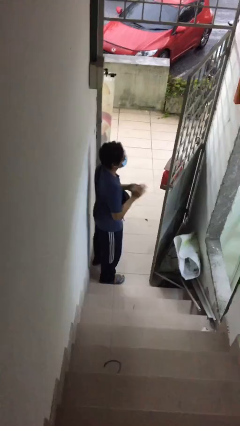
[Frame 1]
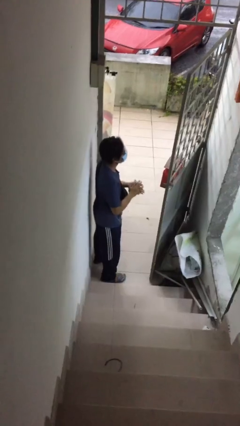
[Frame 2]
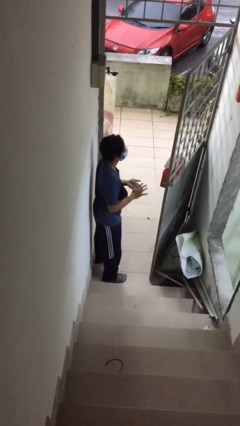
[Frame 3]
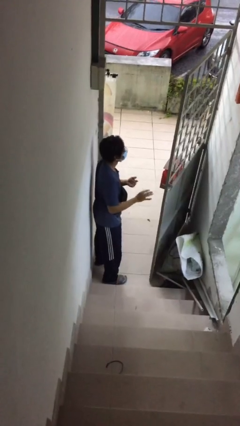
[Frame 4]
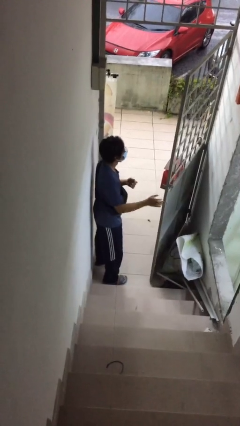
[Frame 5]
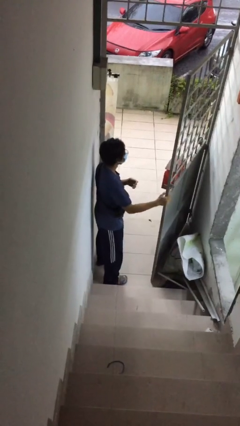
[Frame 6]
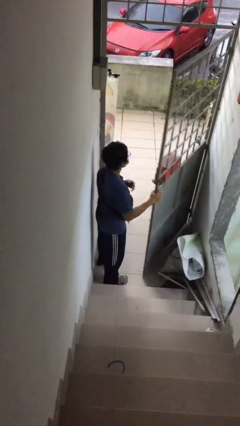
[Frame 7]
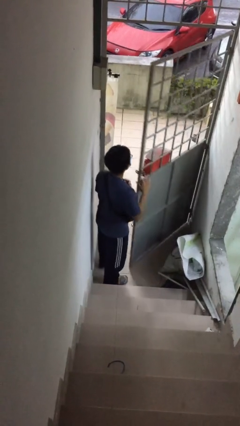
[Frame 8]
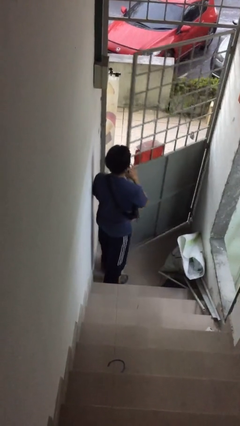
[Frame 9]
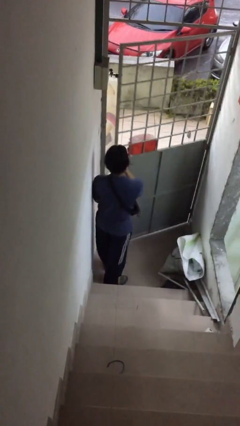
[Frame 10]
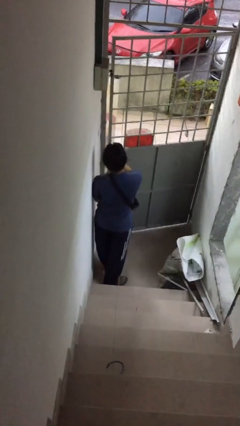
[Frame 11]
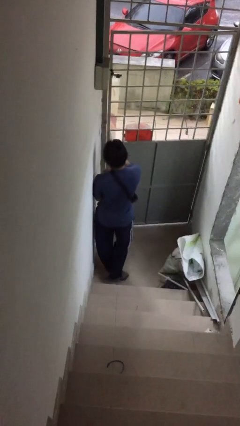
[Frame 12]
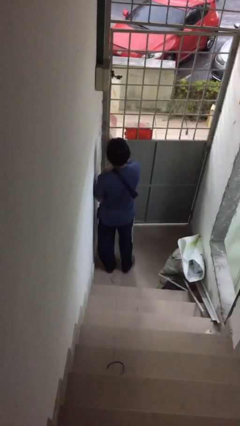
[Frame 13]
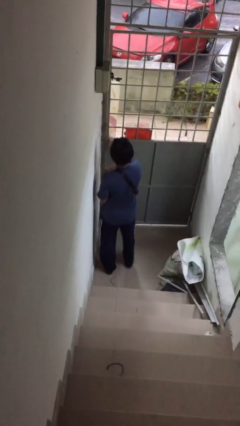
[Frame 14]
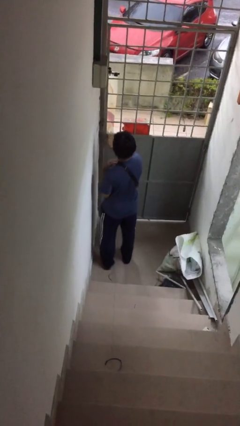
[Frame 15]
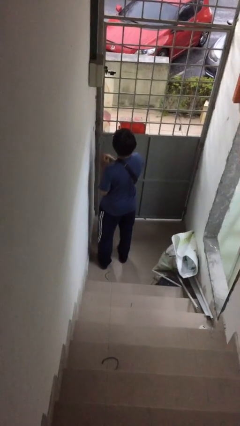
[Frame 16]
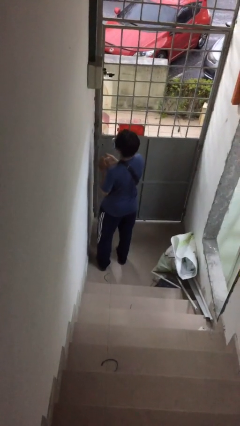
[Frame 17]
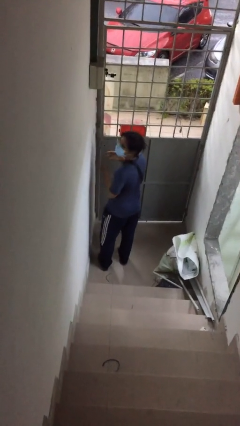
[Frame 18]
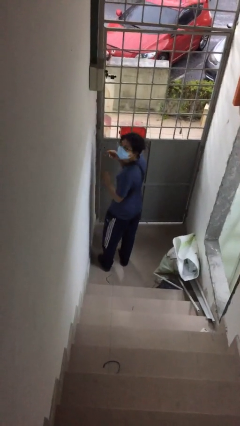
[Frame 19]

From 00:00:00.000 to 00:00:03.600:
person closes facility door

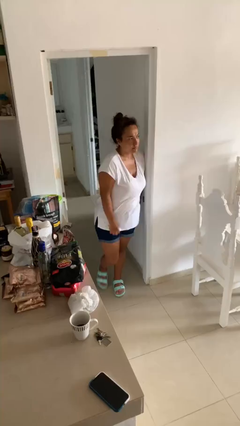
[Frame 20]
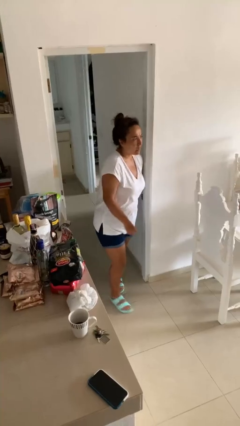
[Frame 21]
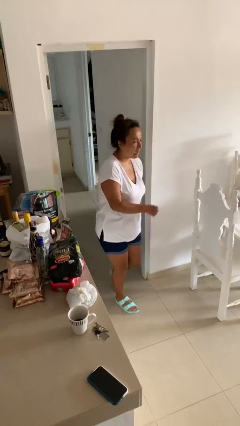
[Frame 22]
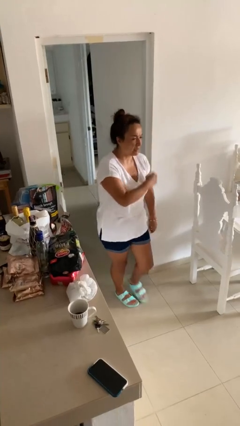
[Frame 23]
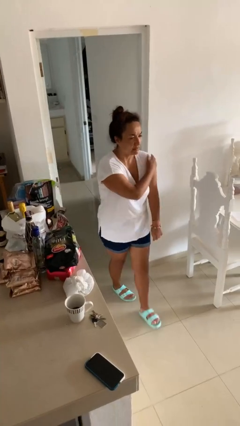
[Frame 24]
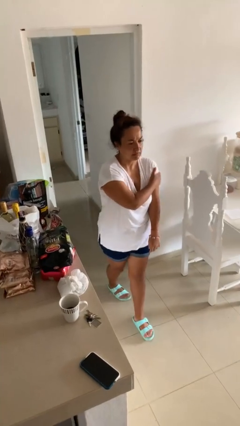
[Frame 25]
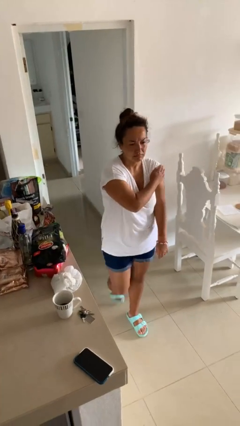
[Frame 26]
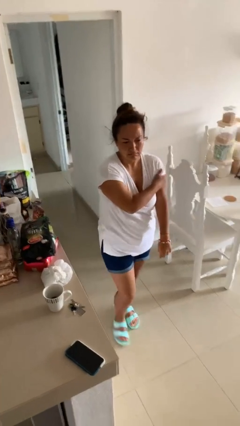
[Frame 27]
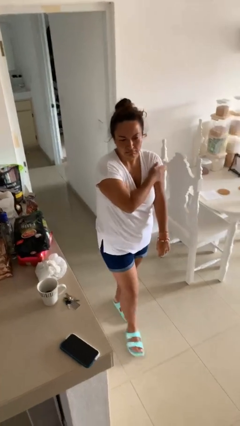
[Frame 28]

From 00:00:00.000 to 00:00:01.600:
person bumps into wall

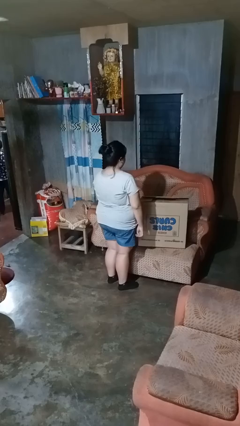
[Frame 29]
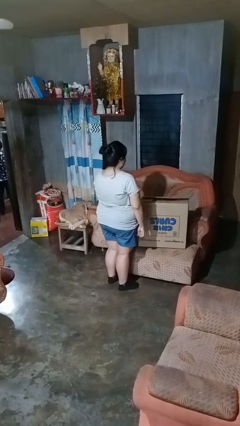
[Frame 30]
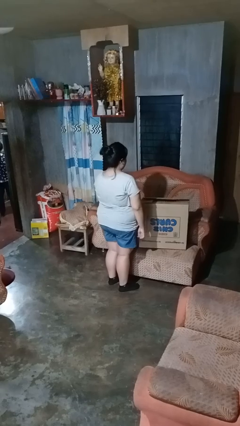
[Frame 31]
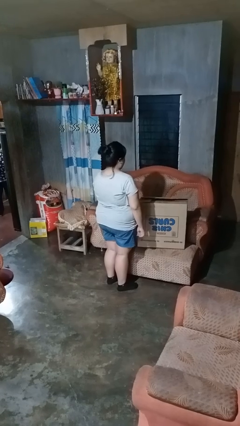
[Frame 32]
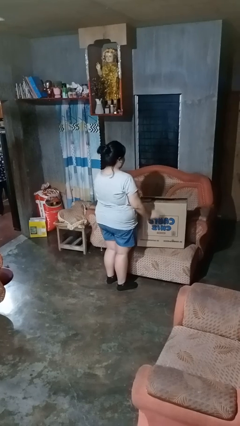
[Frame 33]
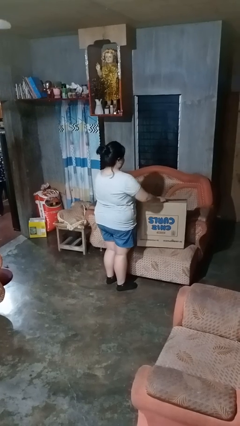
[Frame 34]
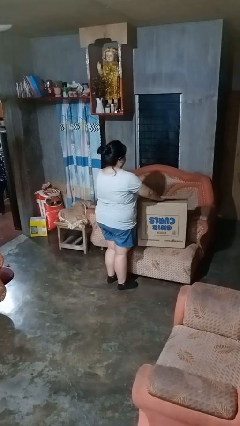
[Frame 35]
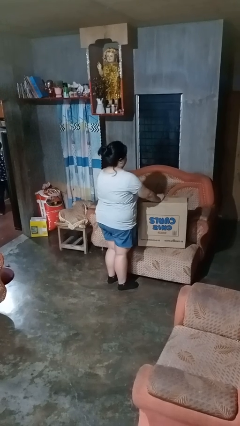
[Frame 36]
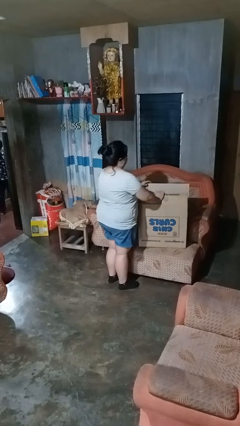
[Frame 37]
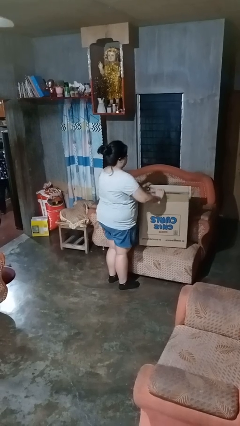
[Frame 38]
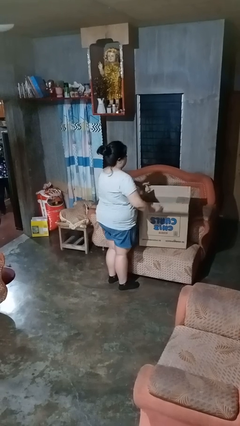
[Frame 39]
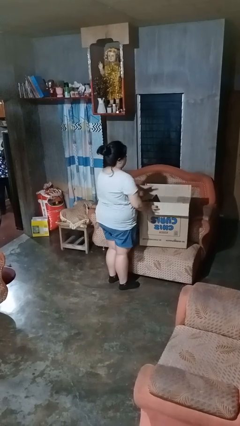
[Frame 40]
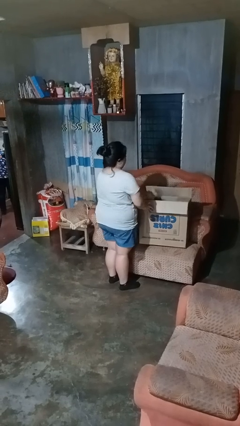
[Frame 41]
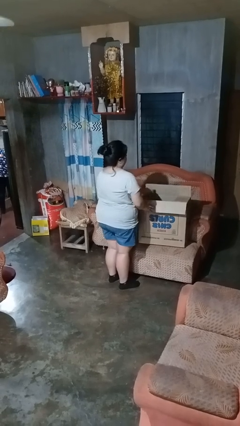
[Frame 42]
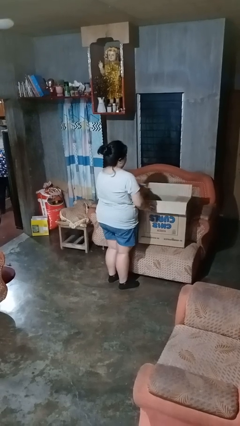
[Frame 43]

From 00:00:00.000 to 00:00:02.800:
person opens box

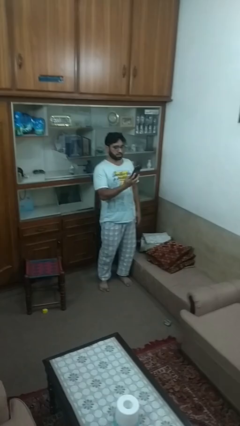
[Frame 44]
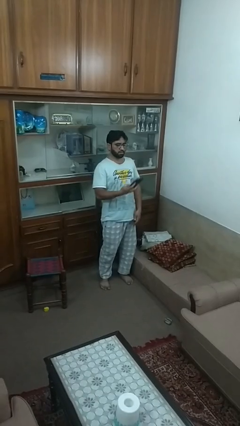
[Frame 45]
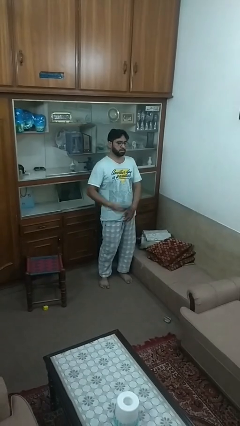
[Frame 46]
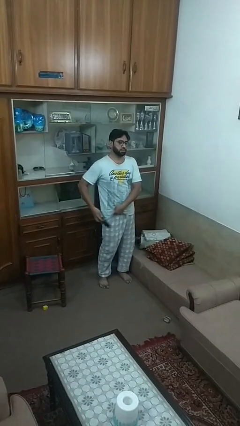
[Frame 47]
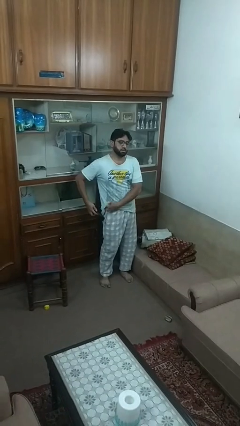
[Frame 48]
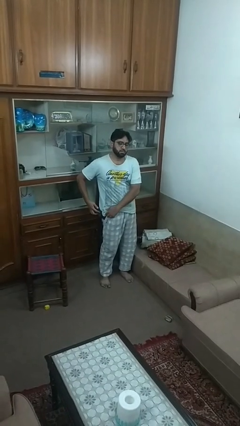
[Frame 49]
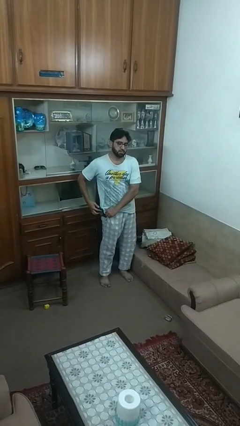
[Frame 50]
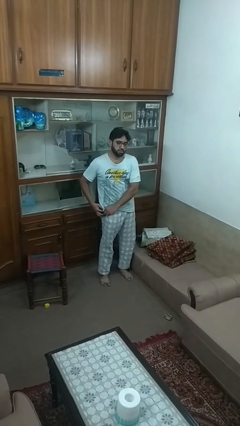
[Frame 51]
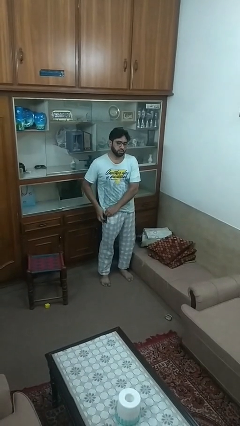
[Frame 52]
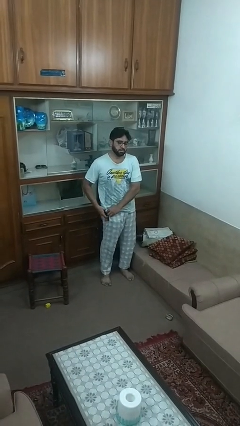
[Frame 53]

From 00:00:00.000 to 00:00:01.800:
person puts phone into pocket

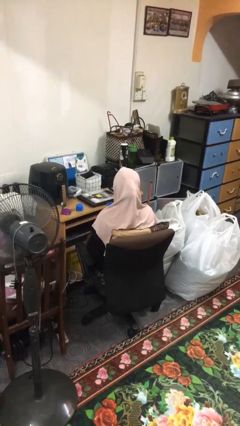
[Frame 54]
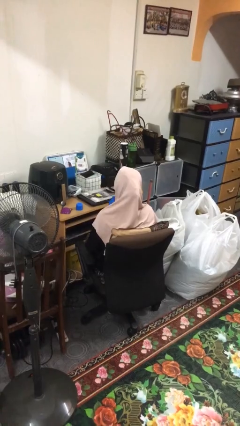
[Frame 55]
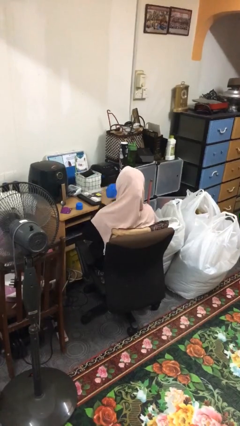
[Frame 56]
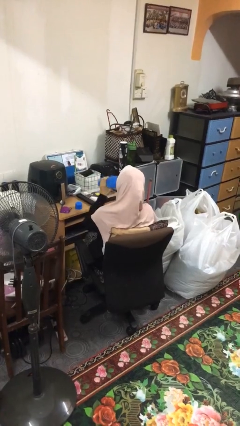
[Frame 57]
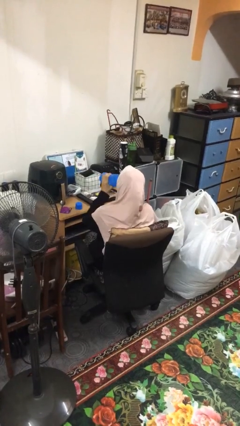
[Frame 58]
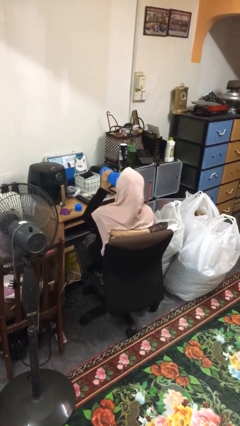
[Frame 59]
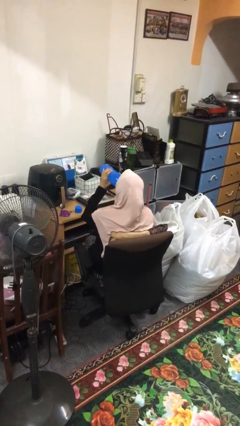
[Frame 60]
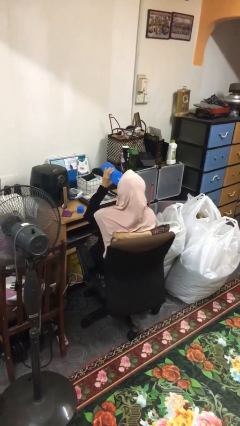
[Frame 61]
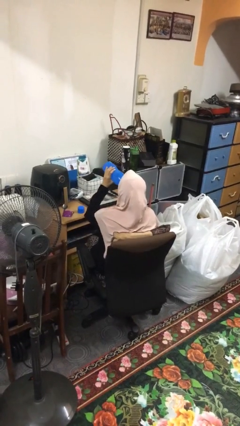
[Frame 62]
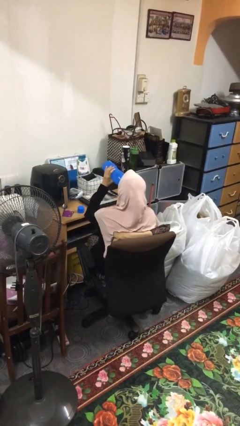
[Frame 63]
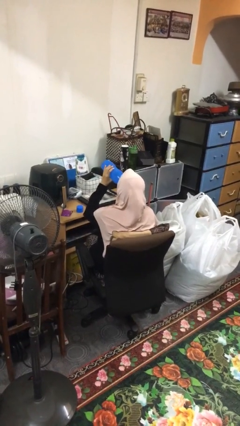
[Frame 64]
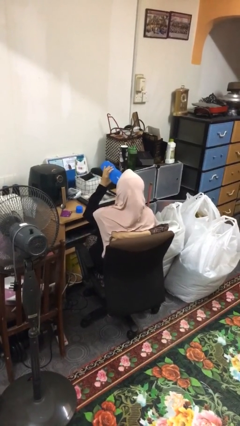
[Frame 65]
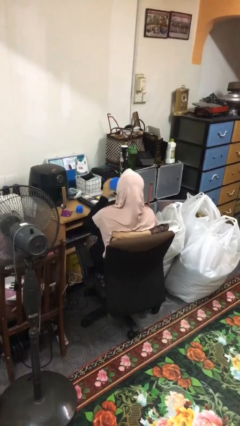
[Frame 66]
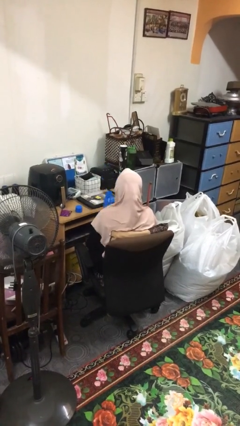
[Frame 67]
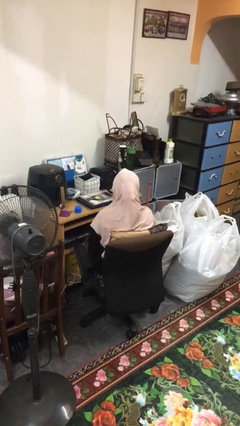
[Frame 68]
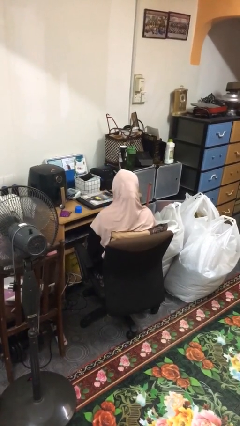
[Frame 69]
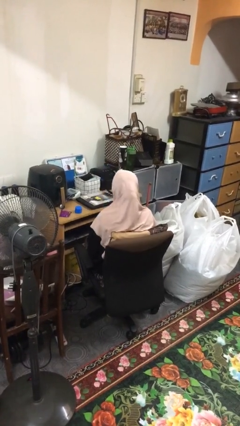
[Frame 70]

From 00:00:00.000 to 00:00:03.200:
person drinks from bottle

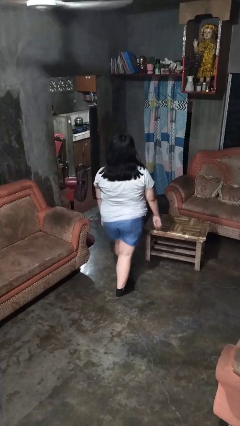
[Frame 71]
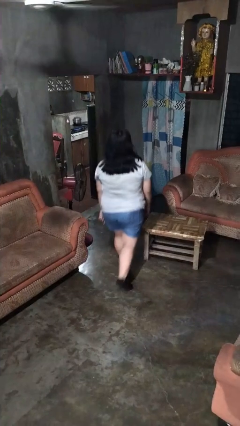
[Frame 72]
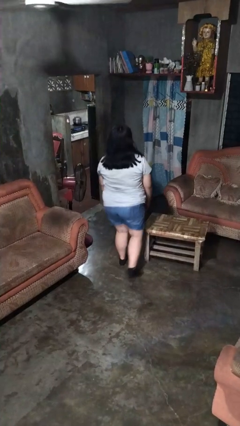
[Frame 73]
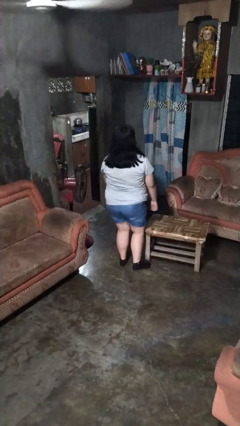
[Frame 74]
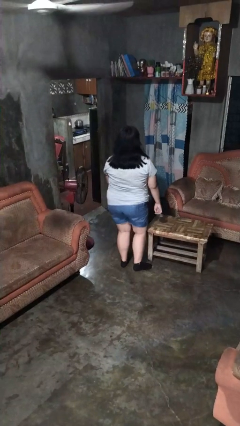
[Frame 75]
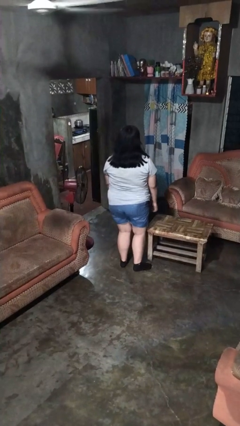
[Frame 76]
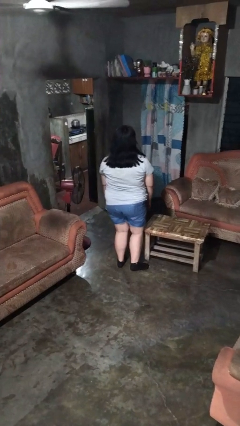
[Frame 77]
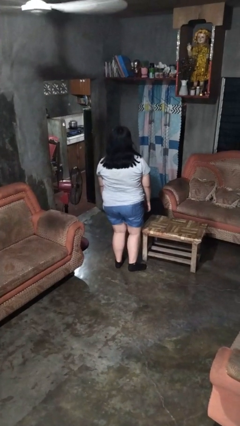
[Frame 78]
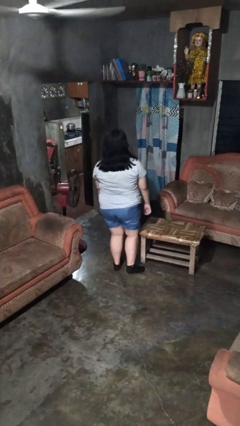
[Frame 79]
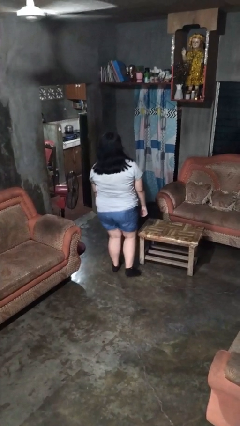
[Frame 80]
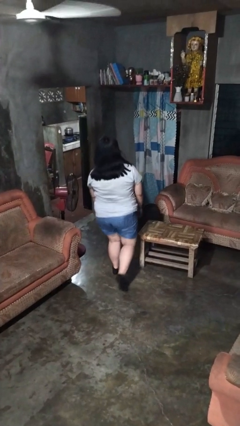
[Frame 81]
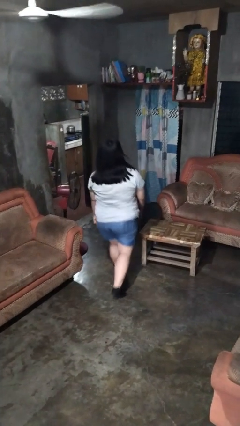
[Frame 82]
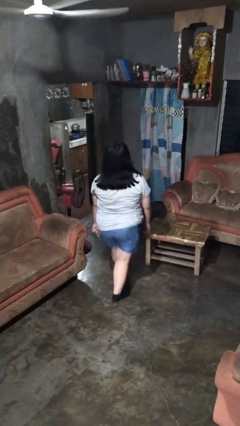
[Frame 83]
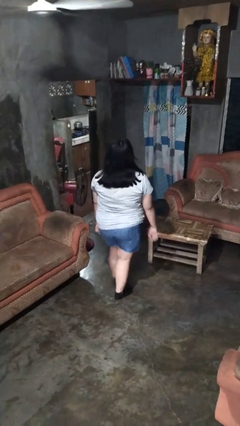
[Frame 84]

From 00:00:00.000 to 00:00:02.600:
person bumps into table

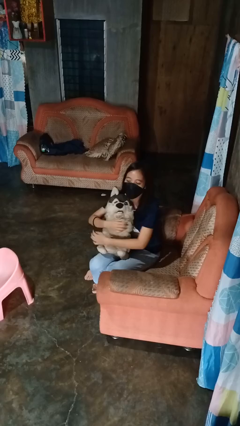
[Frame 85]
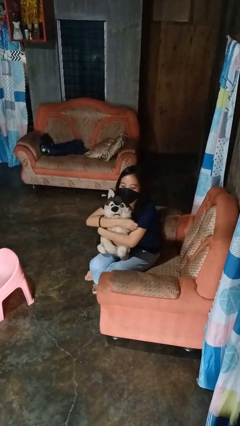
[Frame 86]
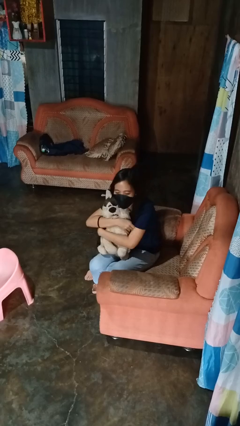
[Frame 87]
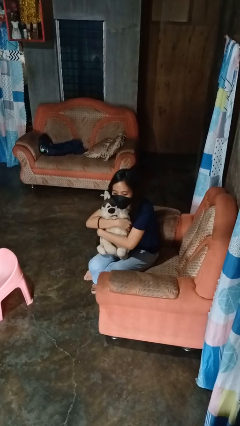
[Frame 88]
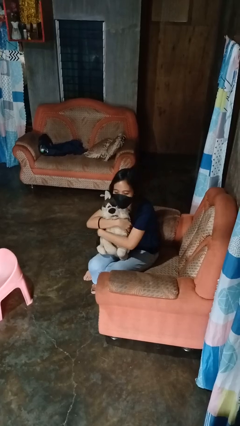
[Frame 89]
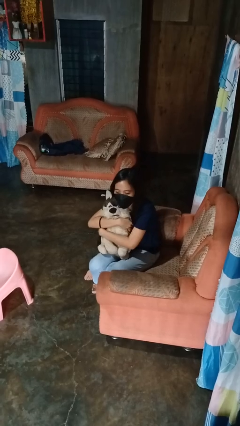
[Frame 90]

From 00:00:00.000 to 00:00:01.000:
person hugs stuffed animal
